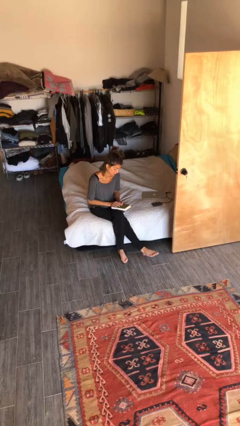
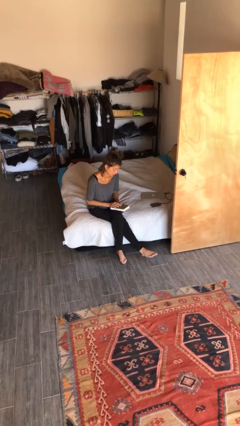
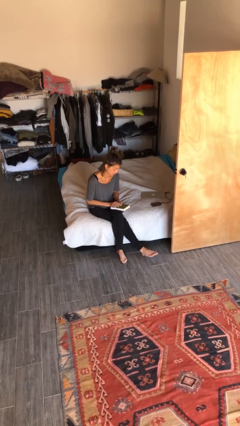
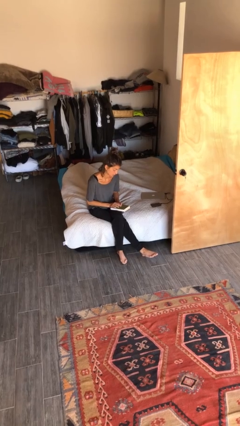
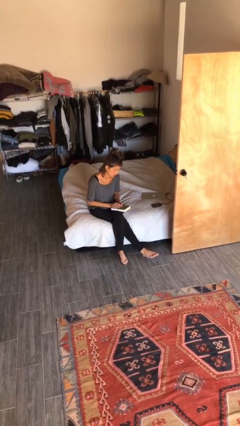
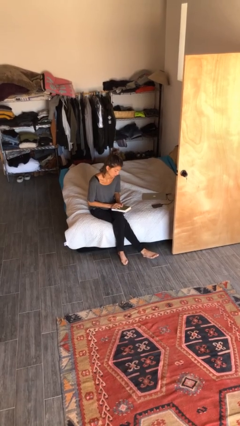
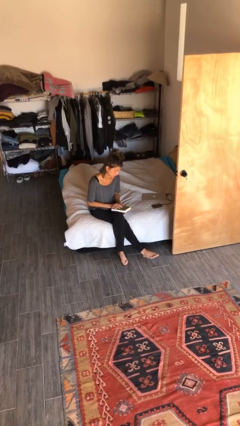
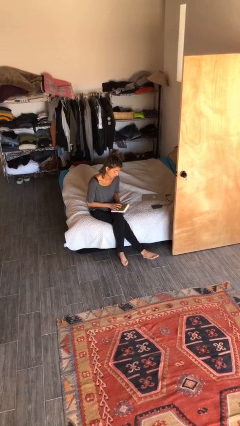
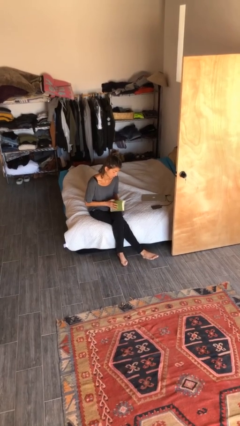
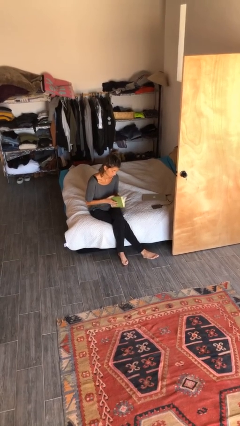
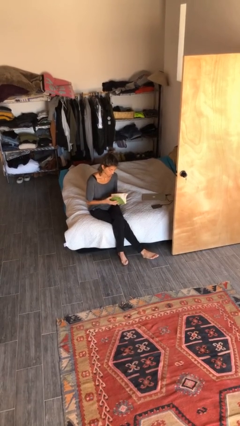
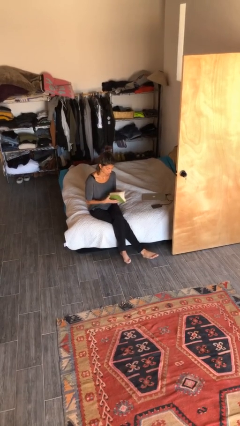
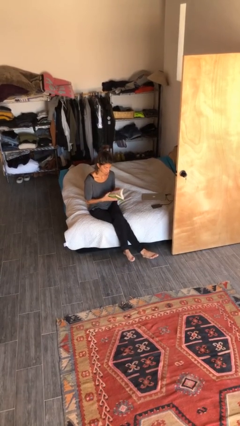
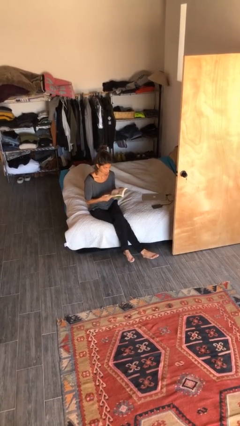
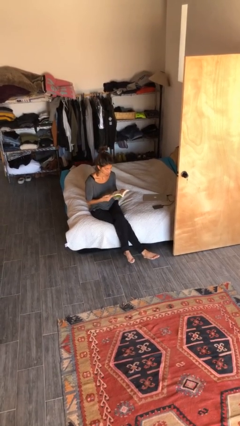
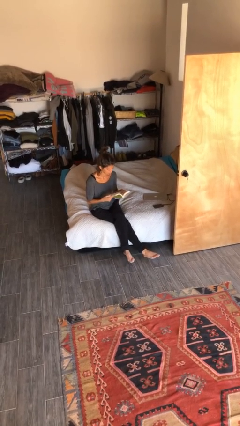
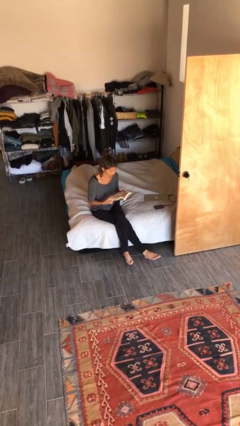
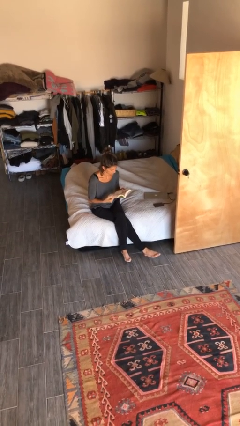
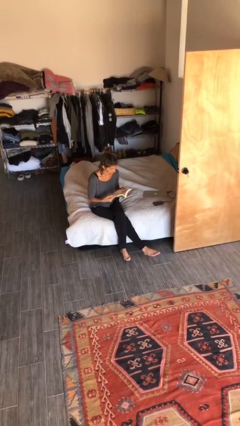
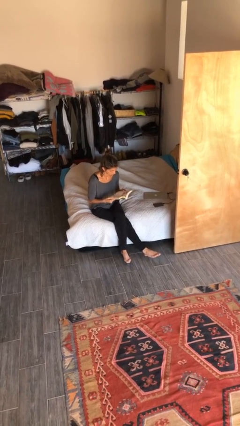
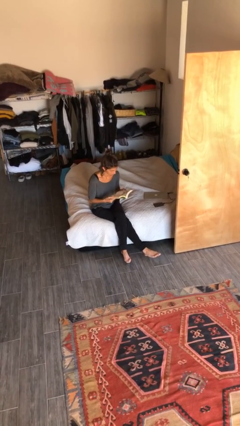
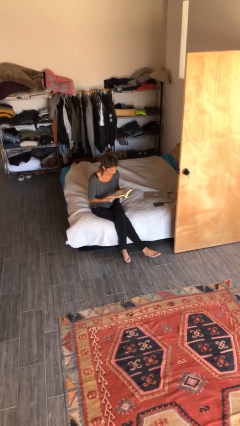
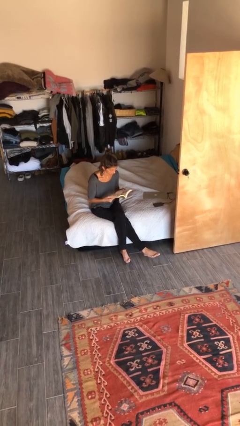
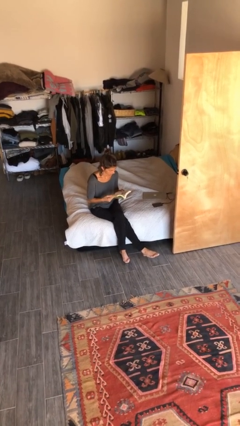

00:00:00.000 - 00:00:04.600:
person reads document

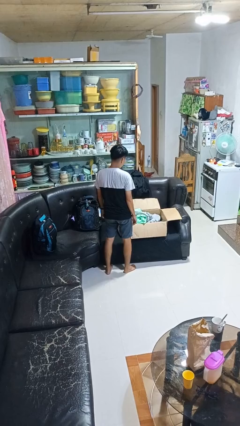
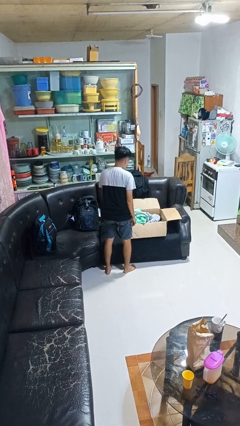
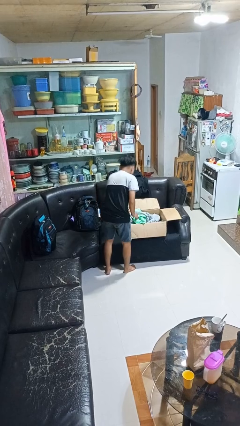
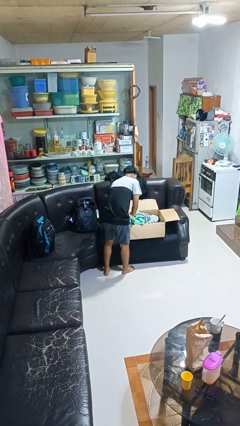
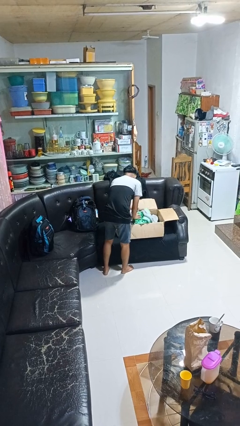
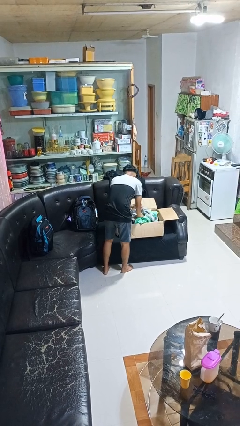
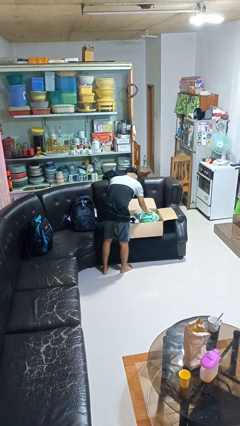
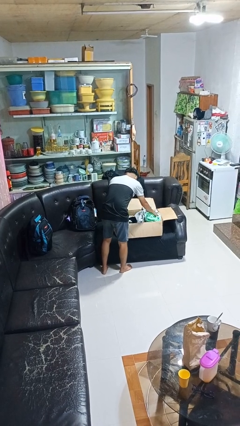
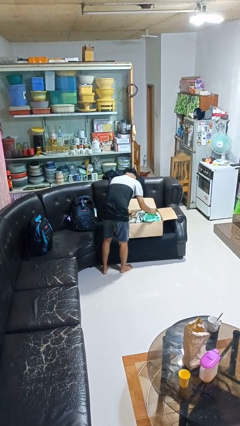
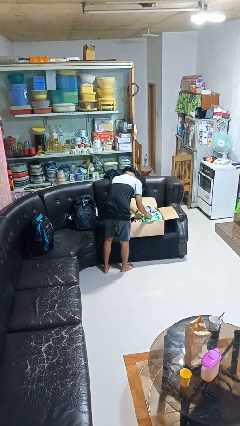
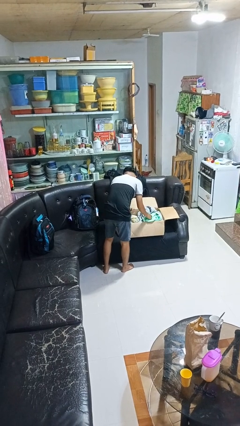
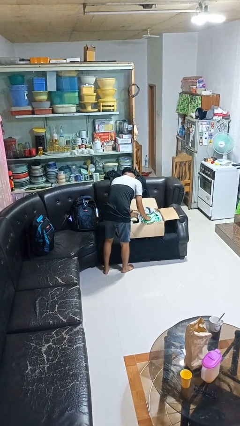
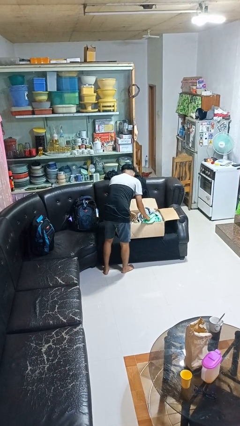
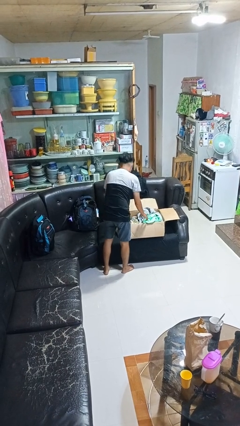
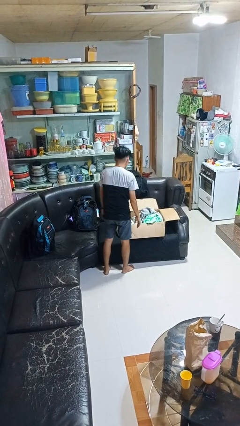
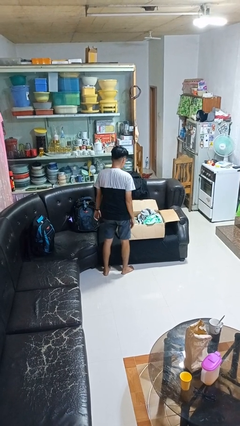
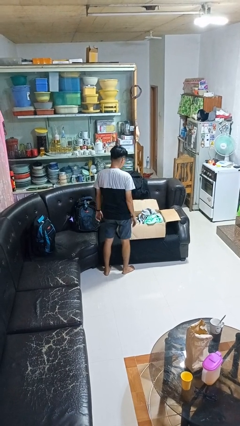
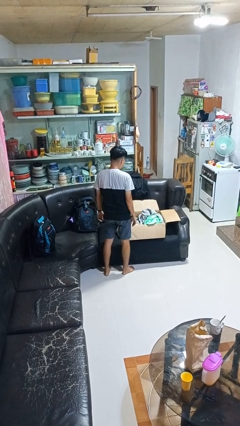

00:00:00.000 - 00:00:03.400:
person searches in box

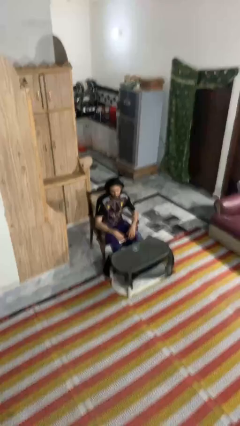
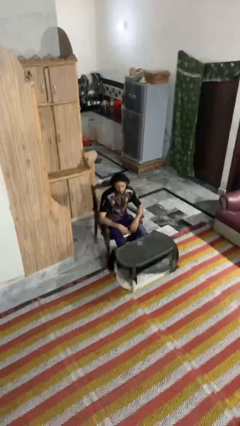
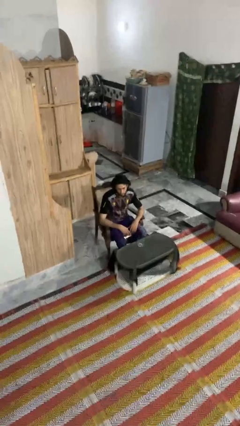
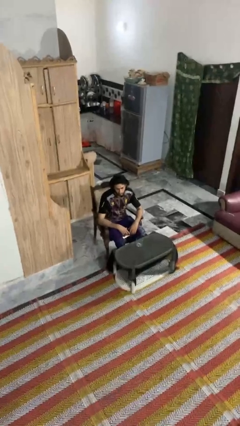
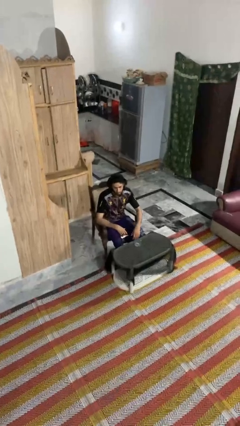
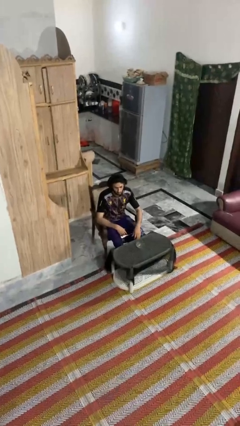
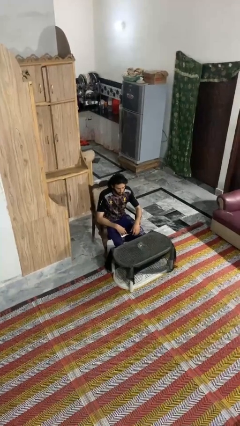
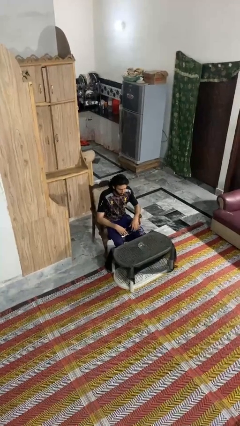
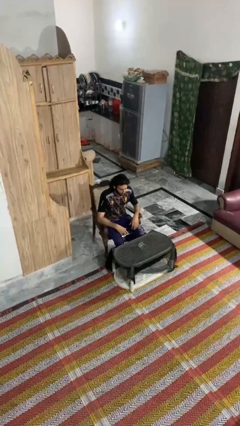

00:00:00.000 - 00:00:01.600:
person knocks over glass

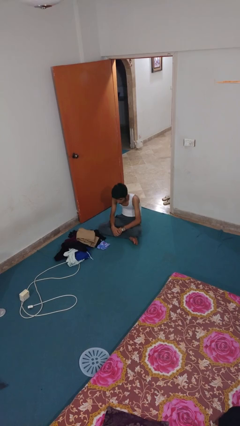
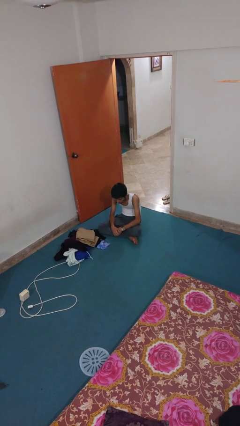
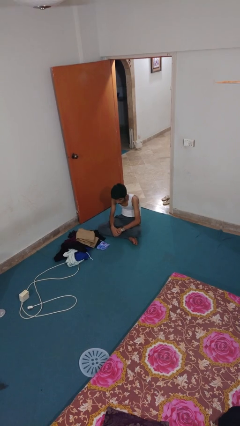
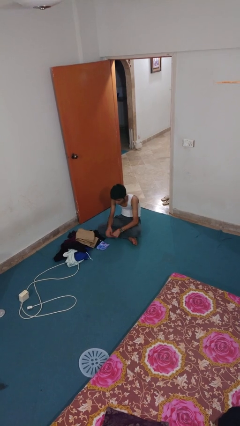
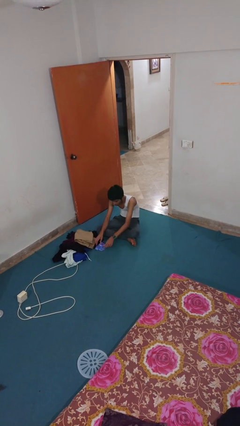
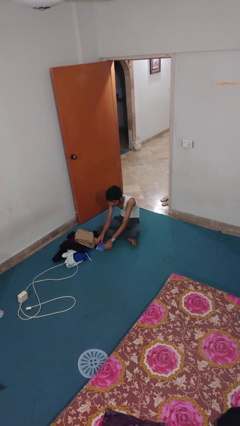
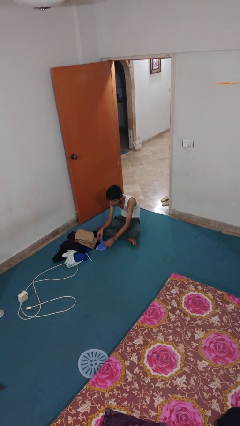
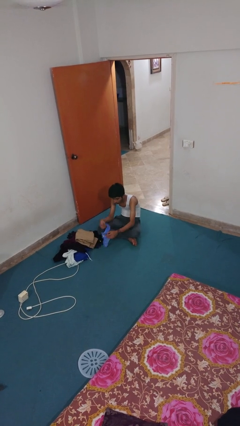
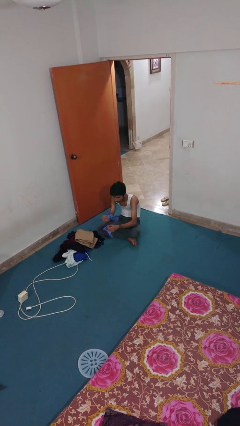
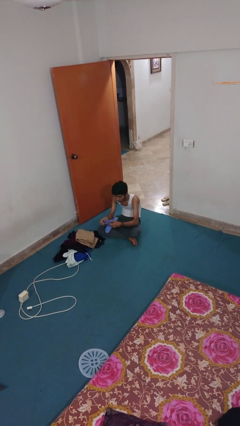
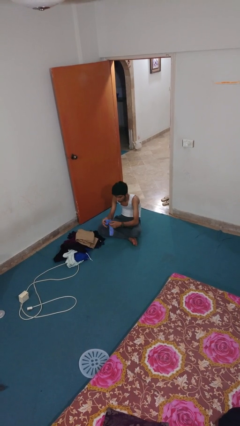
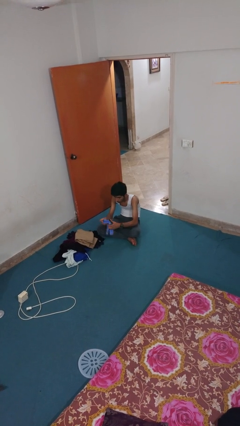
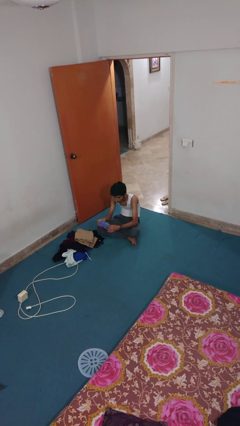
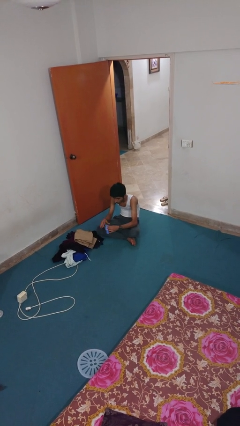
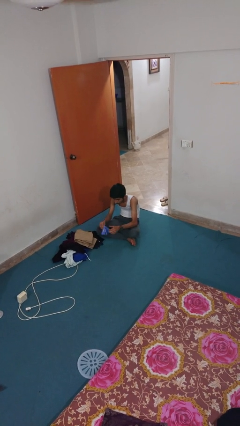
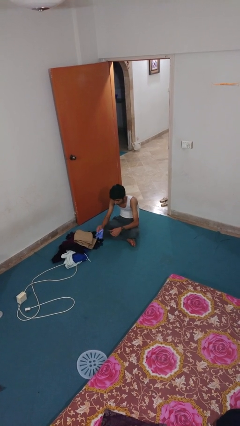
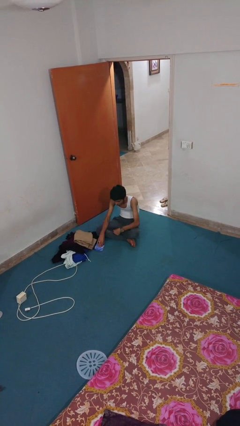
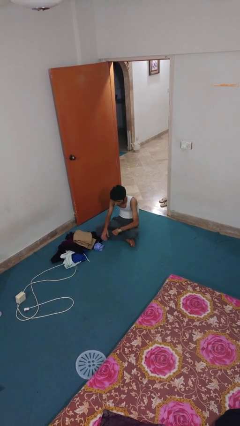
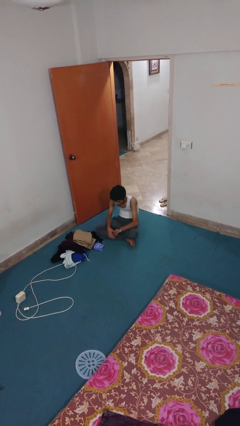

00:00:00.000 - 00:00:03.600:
person folds socks

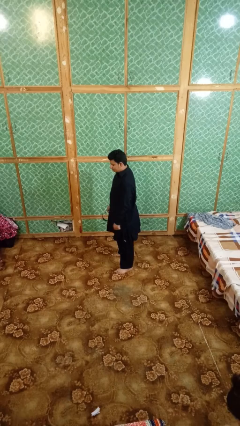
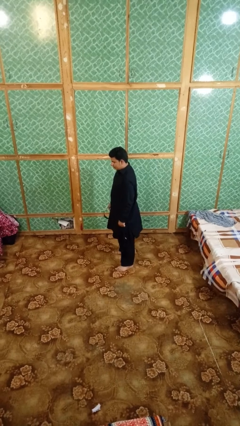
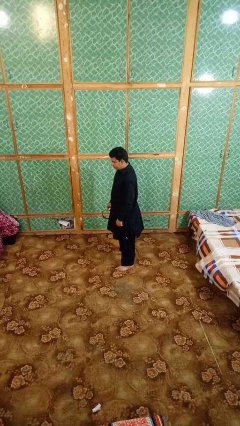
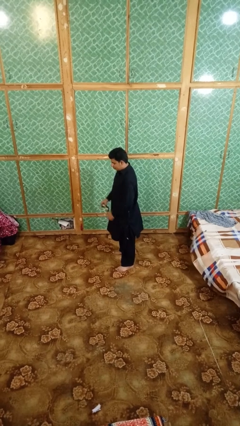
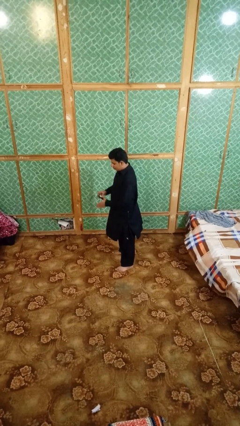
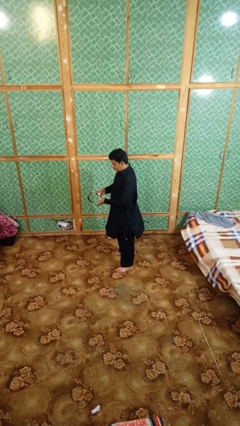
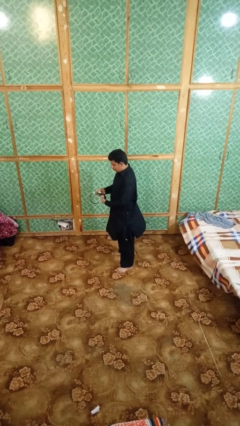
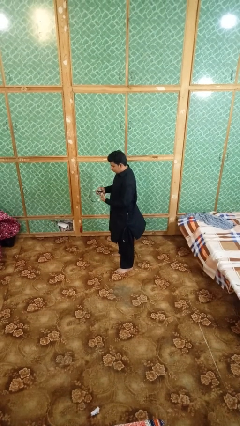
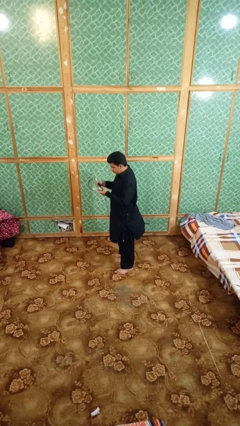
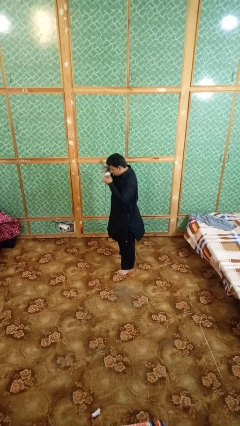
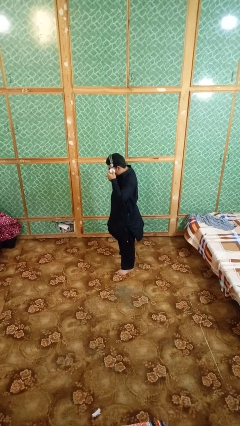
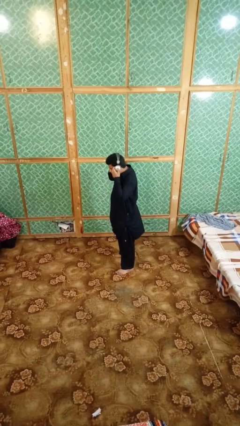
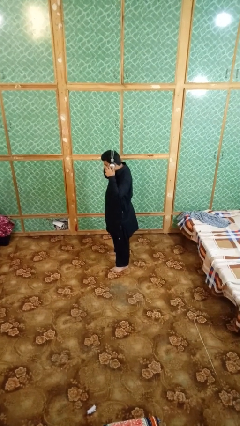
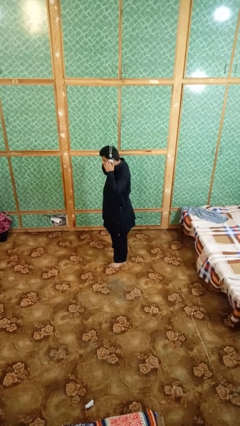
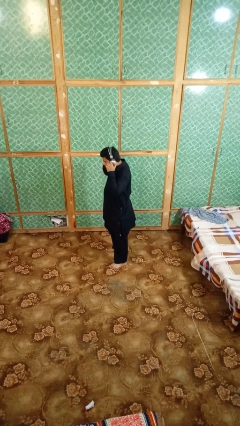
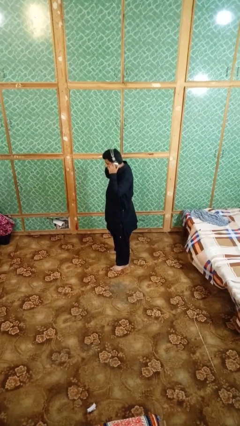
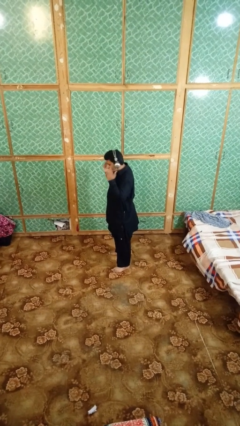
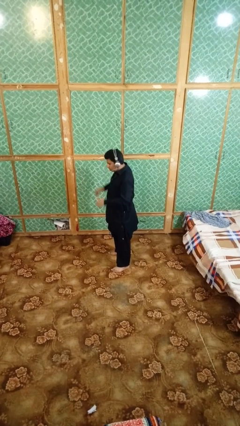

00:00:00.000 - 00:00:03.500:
person puts on headphones

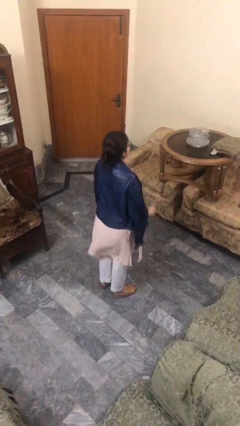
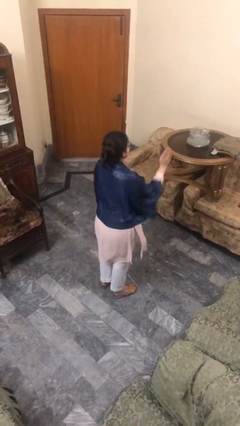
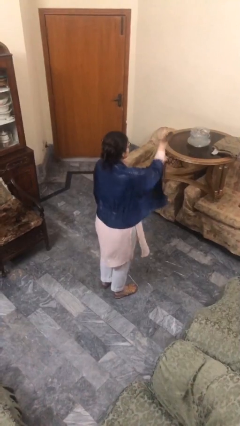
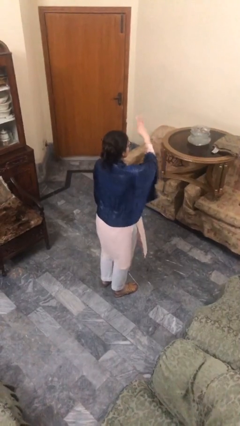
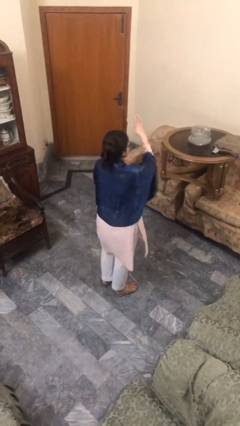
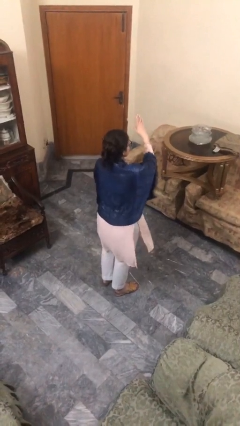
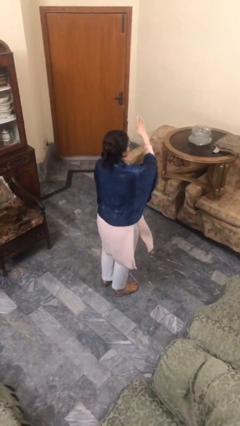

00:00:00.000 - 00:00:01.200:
person gestures swipe left
